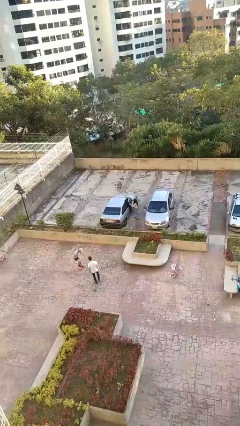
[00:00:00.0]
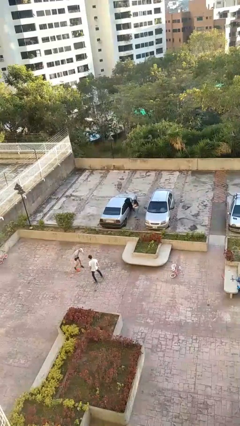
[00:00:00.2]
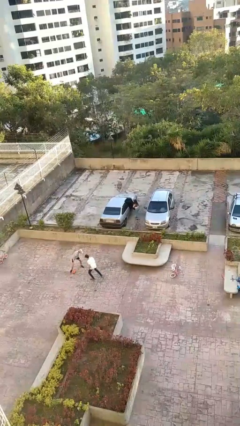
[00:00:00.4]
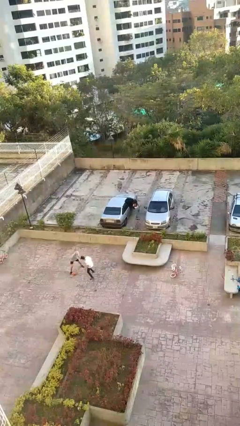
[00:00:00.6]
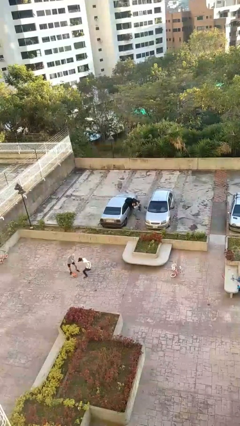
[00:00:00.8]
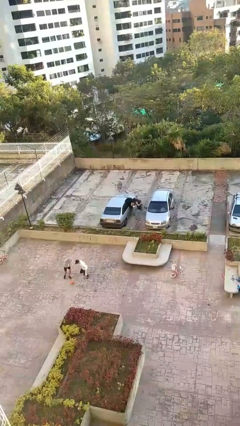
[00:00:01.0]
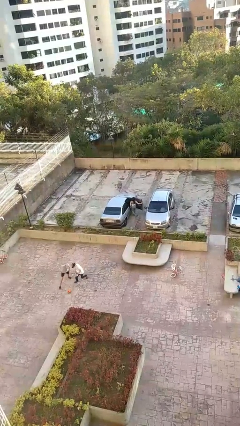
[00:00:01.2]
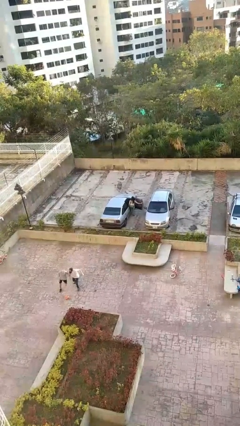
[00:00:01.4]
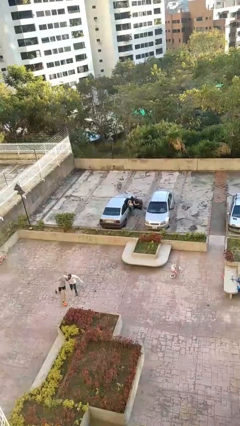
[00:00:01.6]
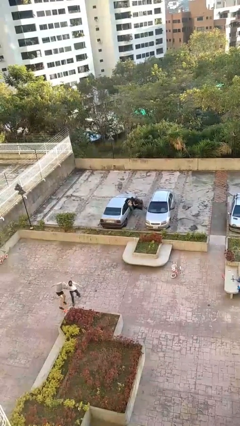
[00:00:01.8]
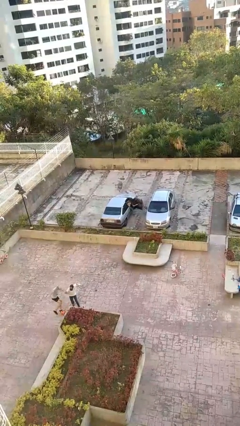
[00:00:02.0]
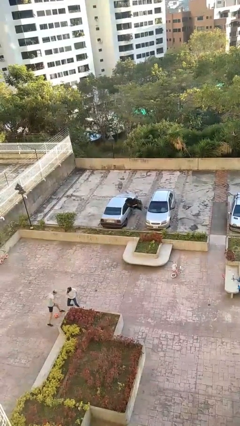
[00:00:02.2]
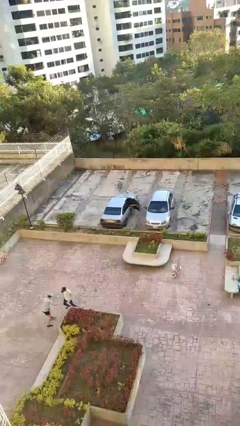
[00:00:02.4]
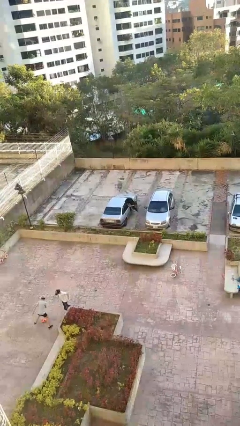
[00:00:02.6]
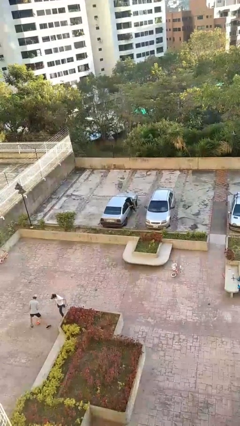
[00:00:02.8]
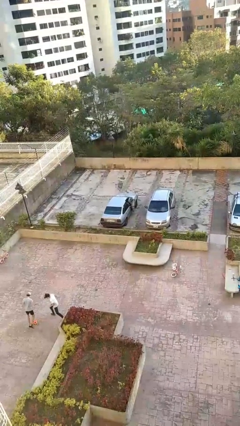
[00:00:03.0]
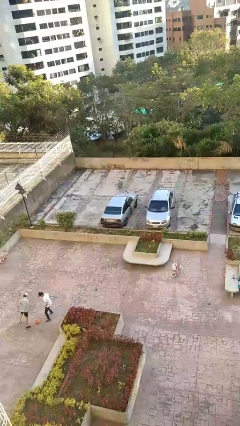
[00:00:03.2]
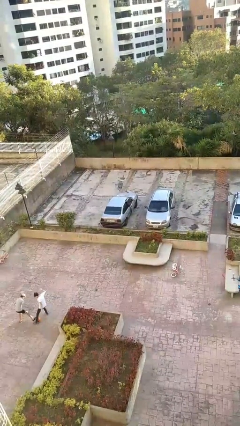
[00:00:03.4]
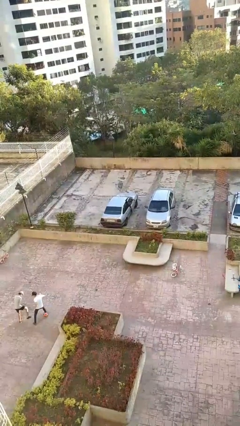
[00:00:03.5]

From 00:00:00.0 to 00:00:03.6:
car picks up person

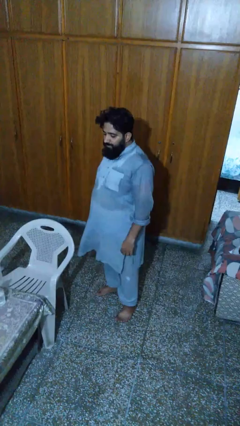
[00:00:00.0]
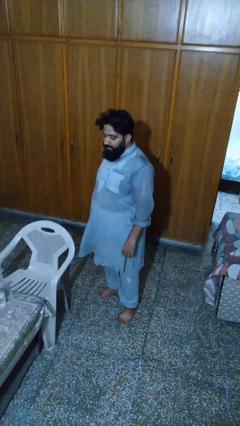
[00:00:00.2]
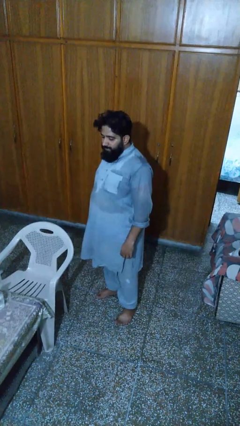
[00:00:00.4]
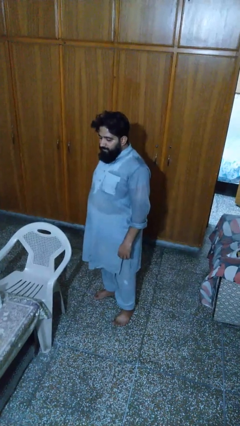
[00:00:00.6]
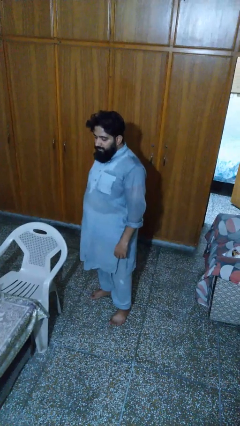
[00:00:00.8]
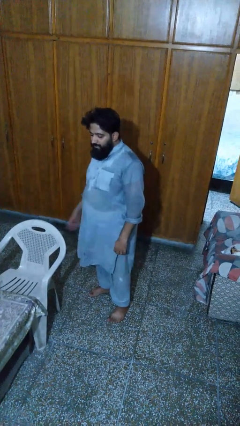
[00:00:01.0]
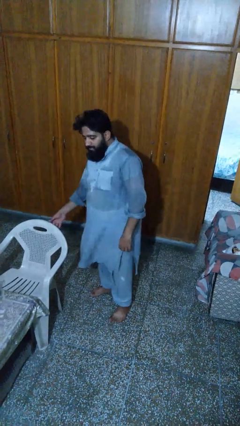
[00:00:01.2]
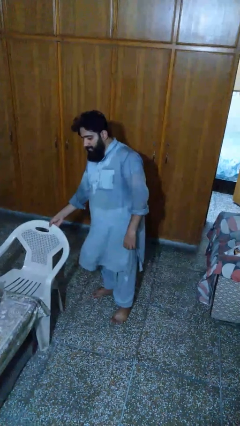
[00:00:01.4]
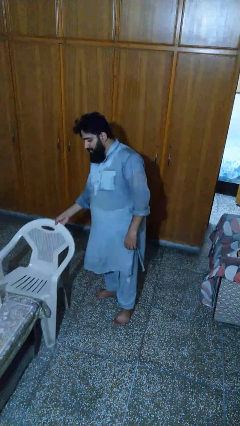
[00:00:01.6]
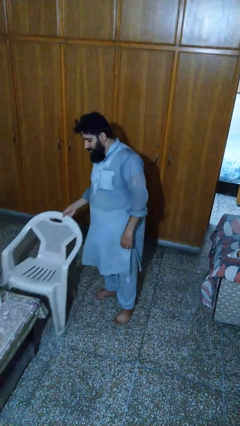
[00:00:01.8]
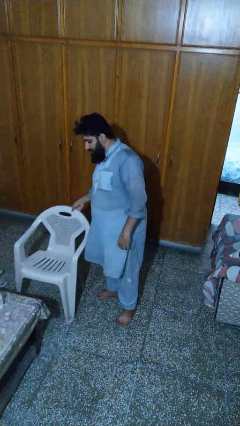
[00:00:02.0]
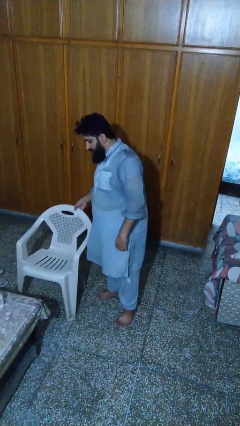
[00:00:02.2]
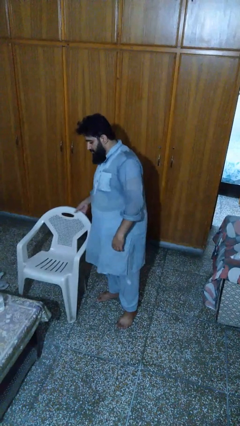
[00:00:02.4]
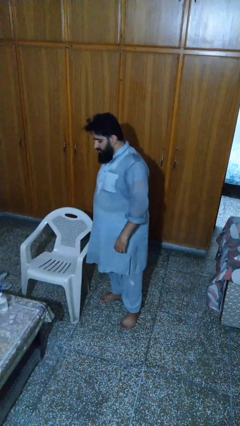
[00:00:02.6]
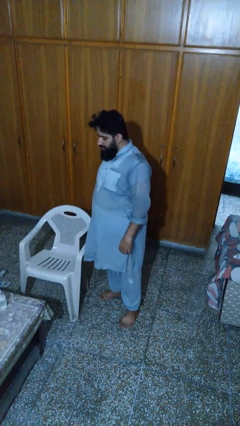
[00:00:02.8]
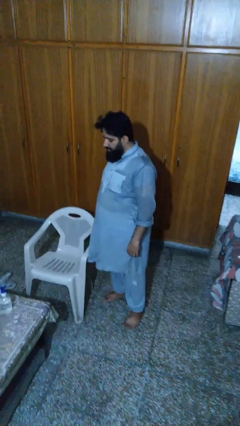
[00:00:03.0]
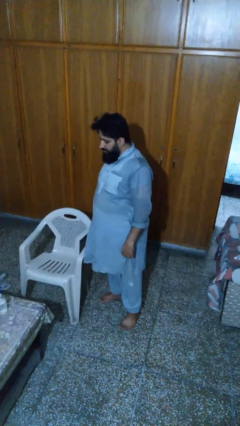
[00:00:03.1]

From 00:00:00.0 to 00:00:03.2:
person pulls out chair

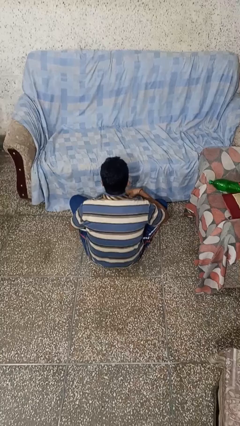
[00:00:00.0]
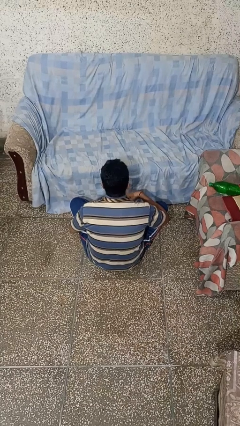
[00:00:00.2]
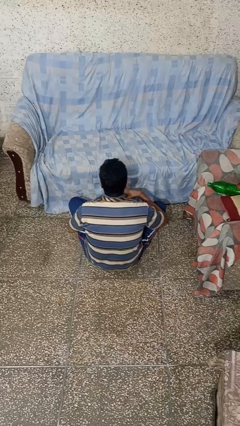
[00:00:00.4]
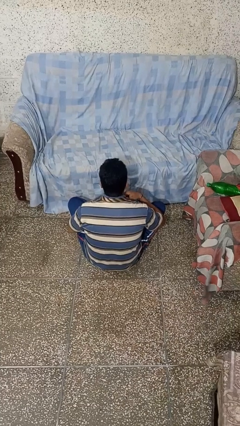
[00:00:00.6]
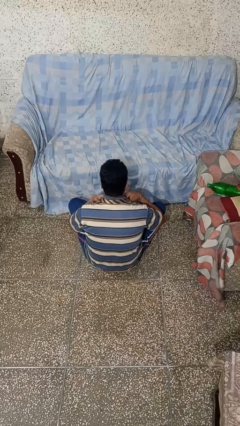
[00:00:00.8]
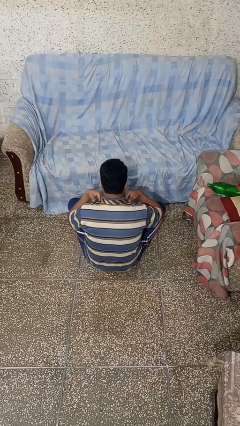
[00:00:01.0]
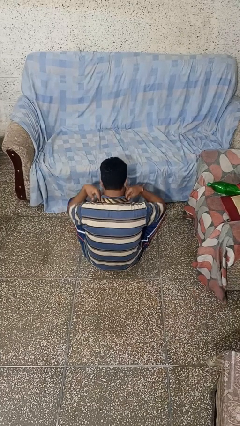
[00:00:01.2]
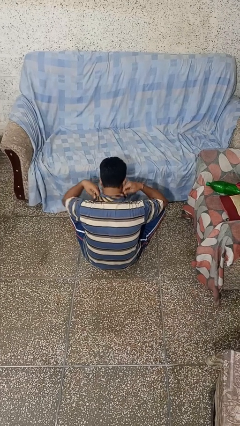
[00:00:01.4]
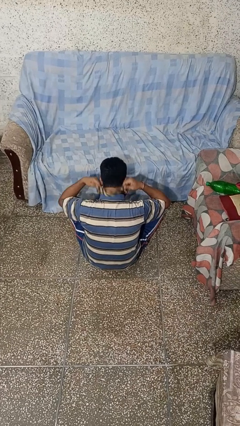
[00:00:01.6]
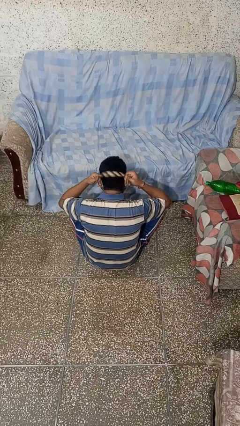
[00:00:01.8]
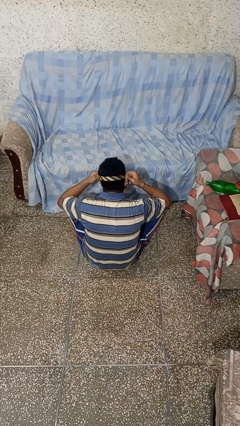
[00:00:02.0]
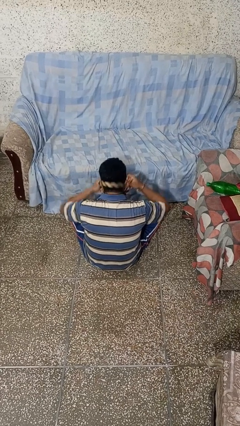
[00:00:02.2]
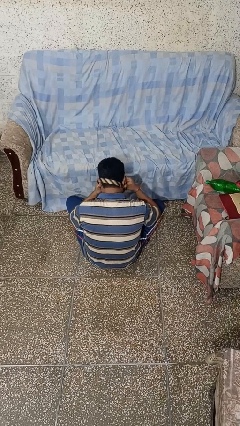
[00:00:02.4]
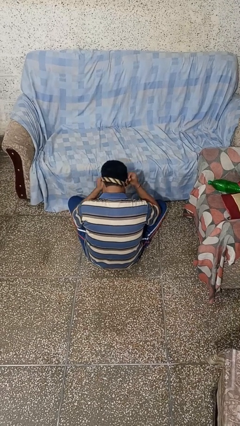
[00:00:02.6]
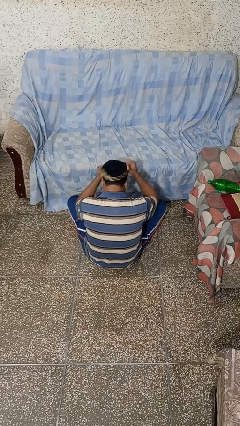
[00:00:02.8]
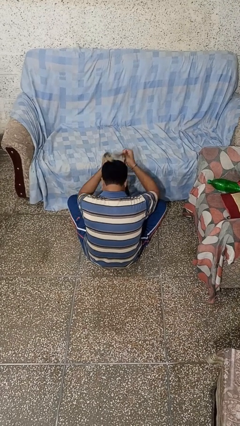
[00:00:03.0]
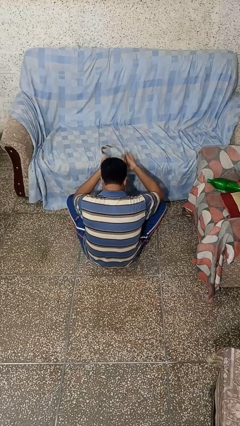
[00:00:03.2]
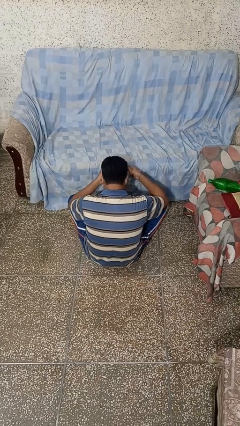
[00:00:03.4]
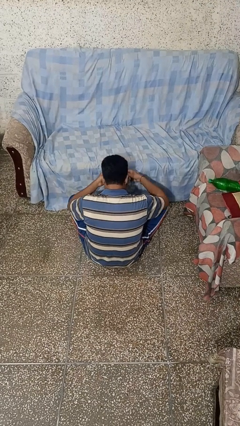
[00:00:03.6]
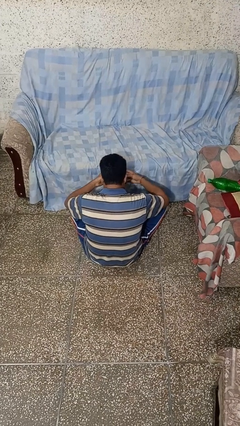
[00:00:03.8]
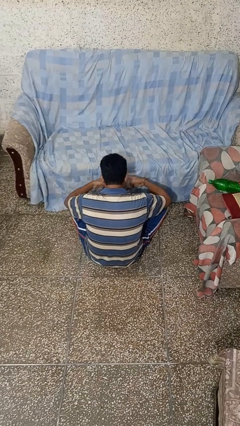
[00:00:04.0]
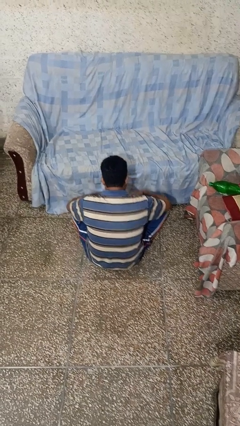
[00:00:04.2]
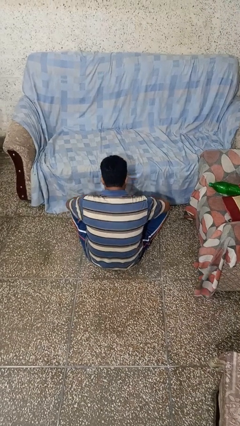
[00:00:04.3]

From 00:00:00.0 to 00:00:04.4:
person takes off necktie

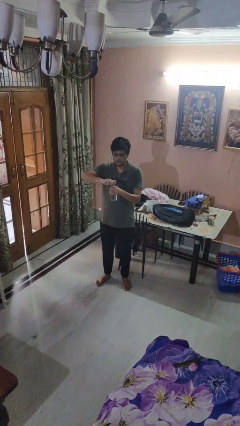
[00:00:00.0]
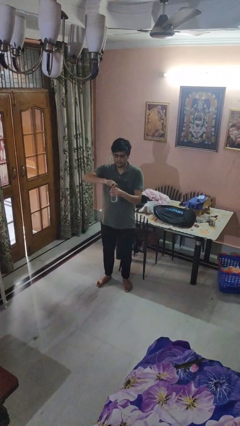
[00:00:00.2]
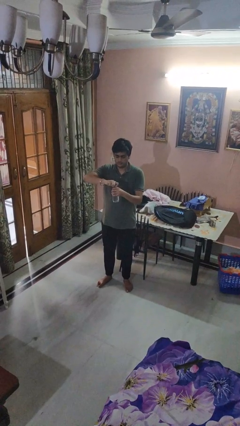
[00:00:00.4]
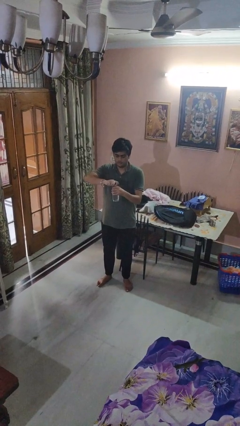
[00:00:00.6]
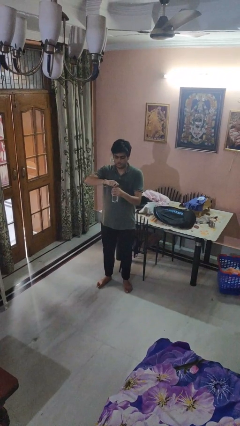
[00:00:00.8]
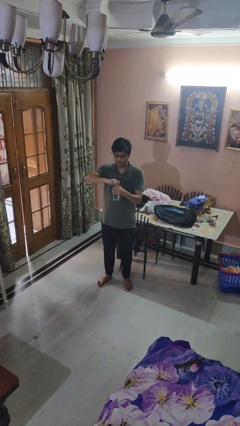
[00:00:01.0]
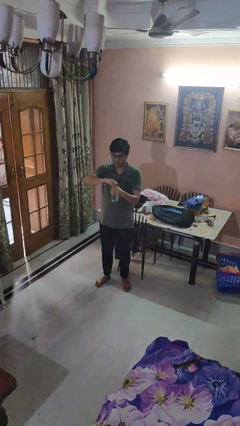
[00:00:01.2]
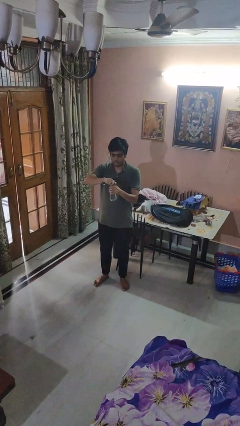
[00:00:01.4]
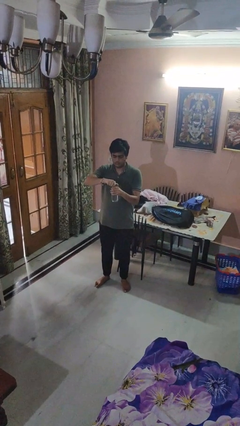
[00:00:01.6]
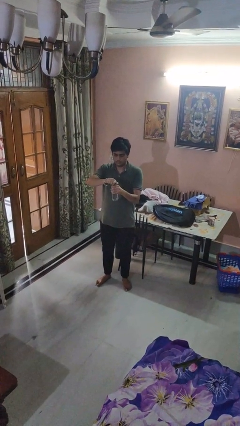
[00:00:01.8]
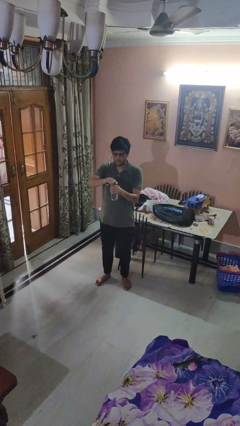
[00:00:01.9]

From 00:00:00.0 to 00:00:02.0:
person screws lid to bottle

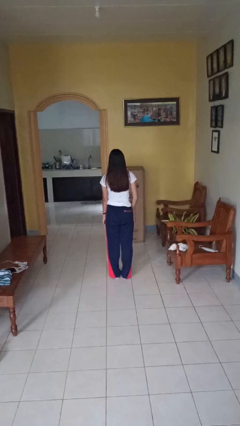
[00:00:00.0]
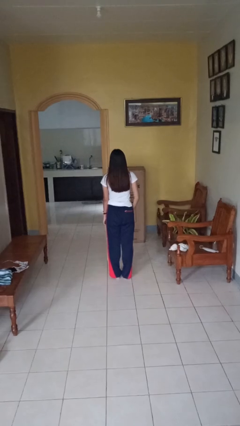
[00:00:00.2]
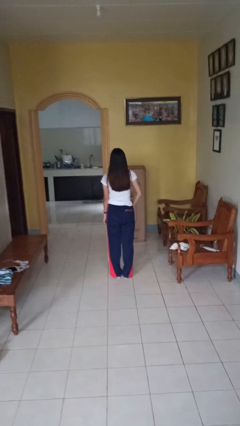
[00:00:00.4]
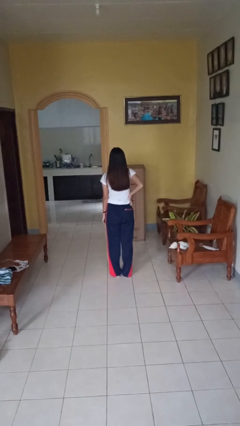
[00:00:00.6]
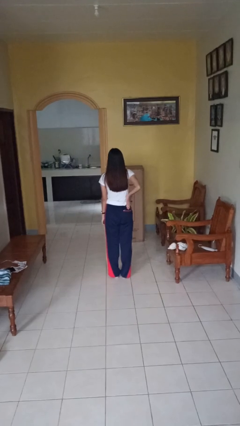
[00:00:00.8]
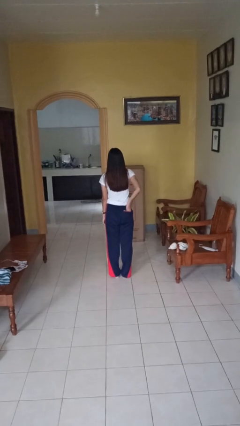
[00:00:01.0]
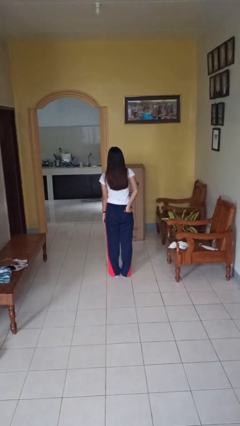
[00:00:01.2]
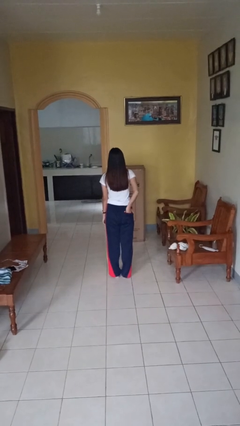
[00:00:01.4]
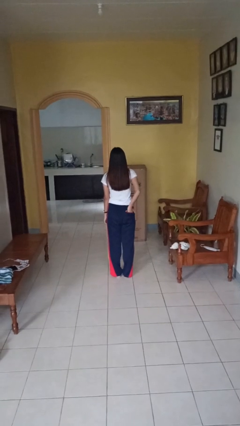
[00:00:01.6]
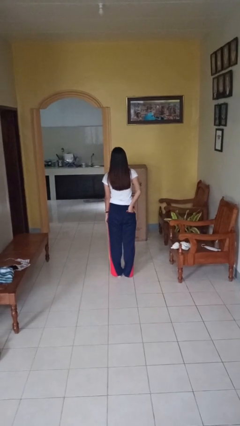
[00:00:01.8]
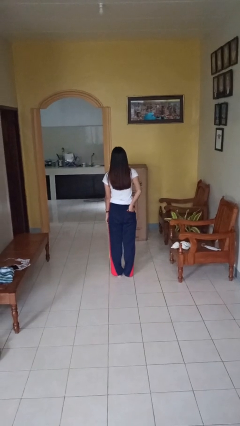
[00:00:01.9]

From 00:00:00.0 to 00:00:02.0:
person puts hands in back pockets

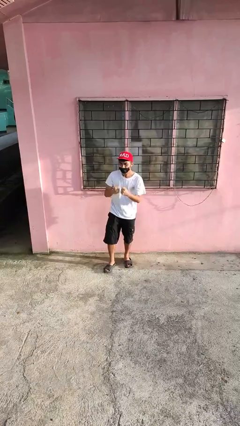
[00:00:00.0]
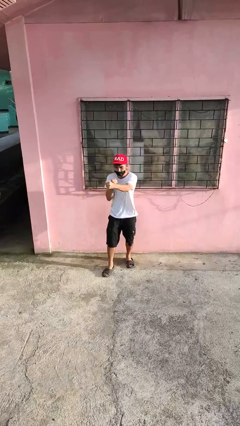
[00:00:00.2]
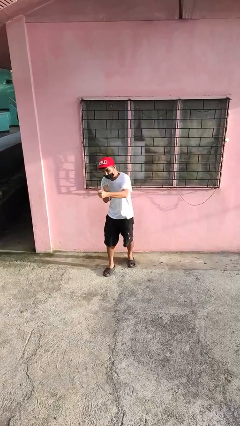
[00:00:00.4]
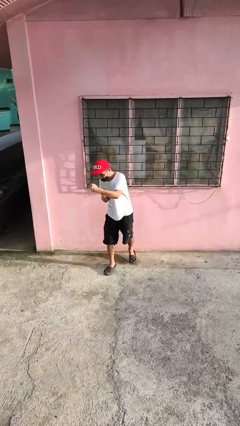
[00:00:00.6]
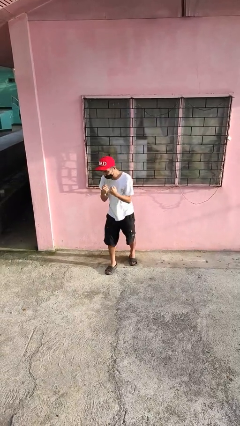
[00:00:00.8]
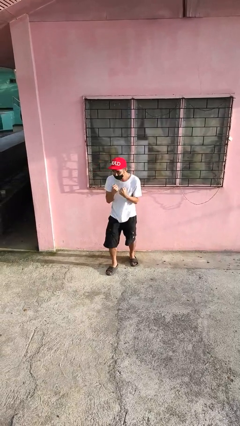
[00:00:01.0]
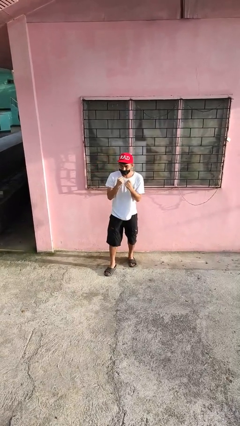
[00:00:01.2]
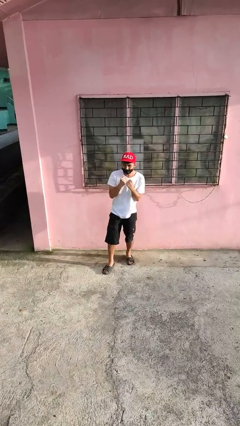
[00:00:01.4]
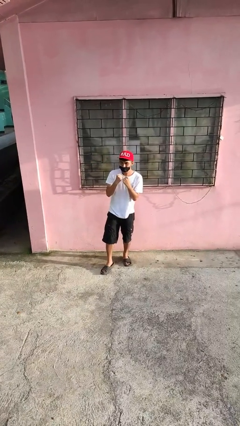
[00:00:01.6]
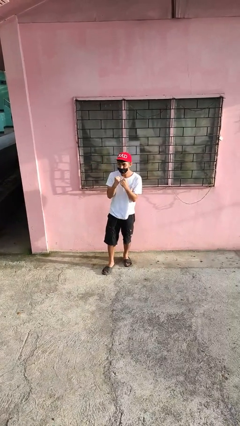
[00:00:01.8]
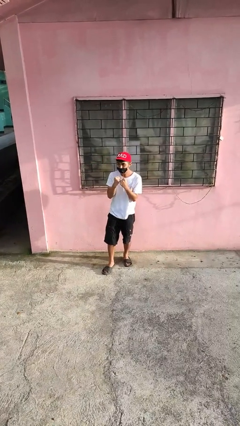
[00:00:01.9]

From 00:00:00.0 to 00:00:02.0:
person punches
